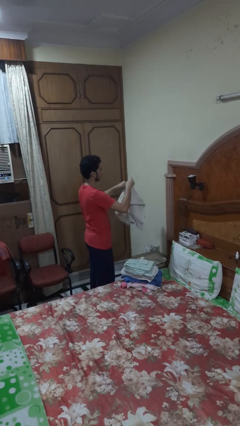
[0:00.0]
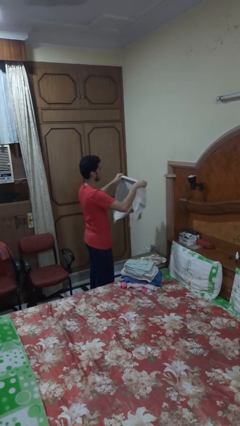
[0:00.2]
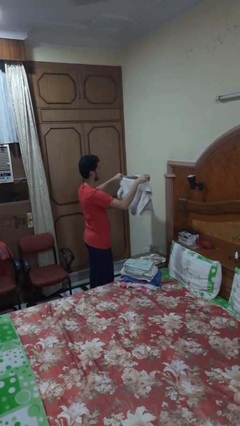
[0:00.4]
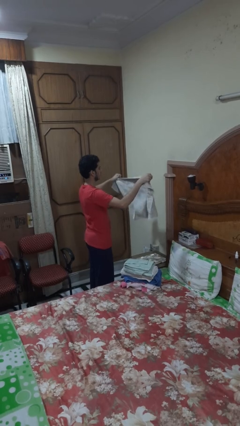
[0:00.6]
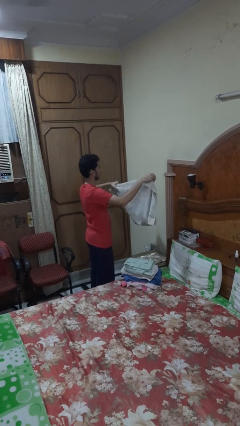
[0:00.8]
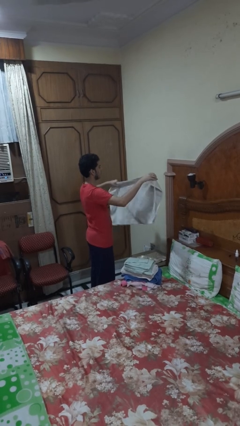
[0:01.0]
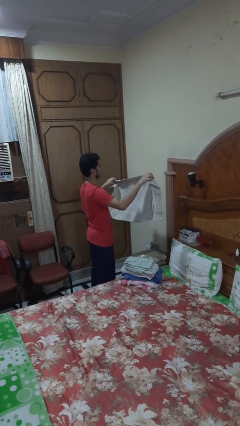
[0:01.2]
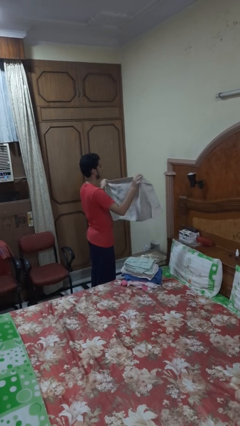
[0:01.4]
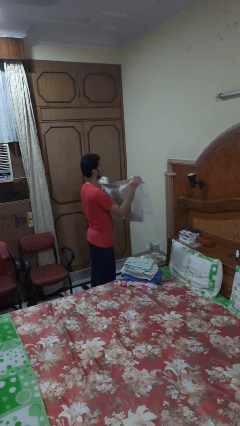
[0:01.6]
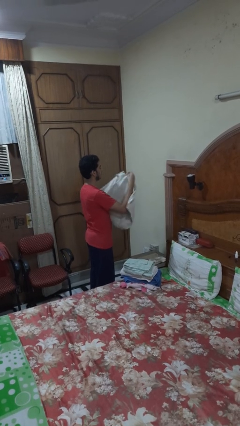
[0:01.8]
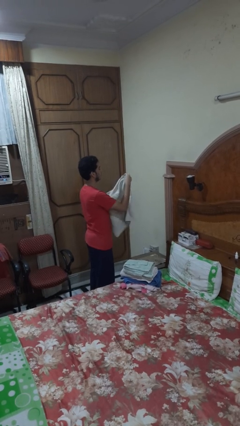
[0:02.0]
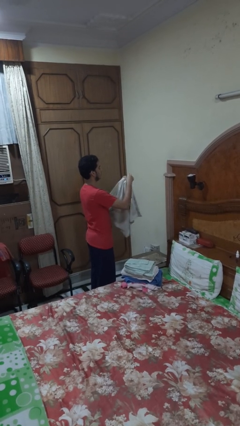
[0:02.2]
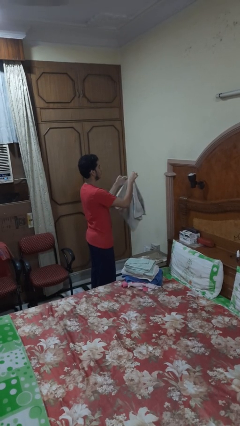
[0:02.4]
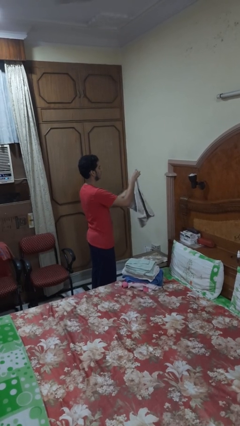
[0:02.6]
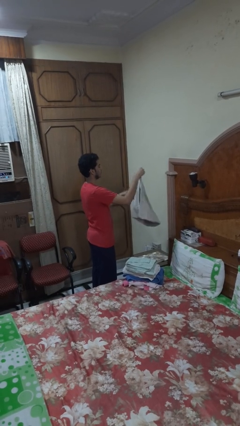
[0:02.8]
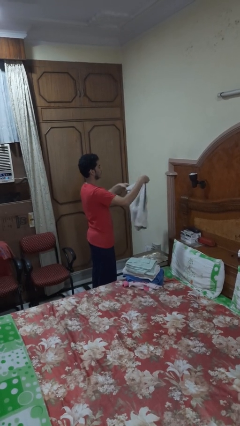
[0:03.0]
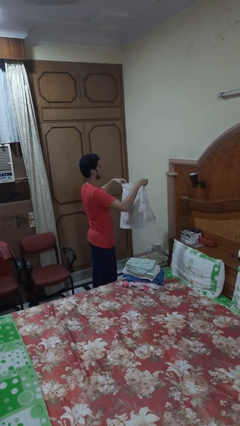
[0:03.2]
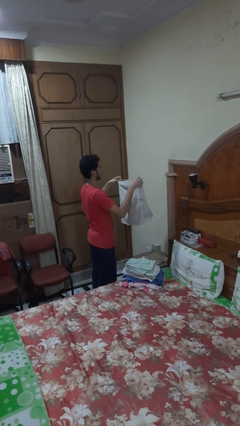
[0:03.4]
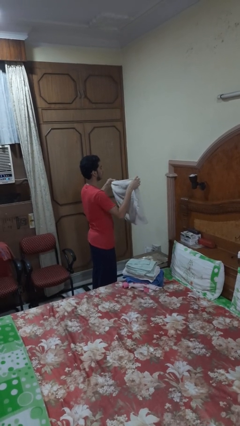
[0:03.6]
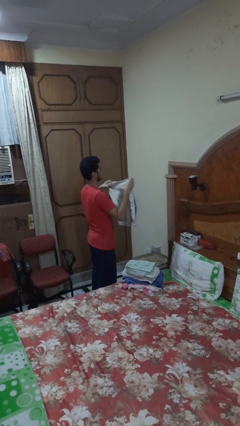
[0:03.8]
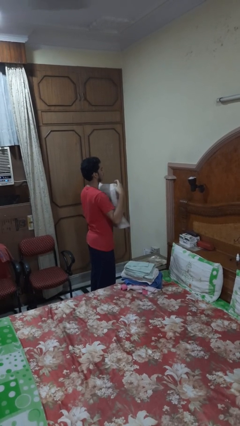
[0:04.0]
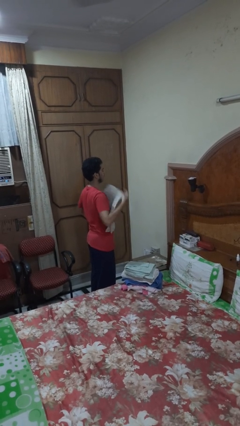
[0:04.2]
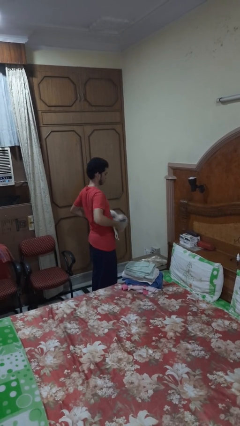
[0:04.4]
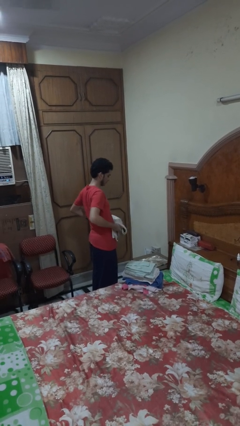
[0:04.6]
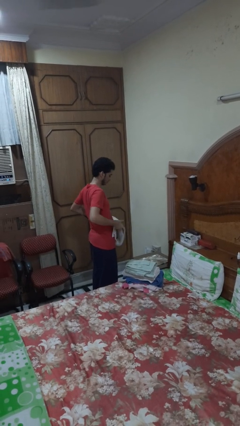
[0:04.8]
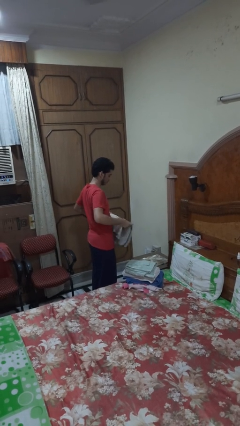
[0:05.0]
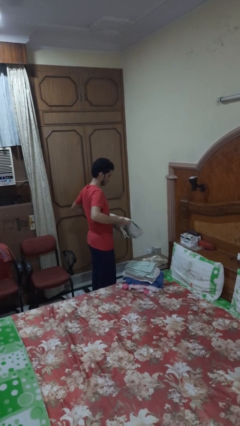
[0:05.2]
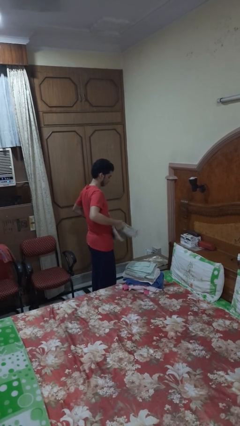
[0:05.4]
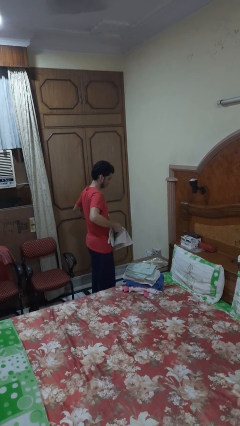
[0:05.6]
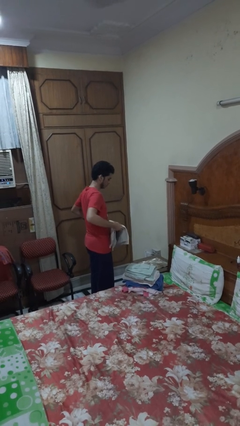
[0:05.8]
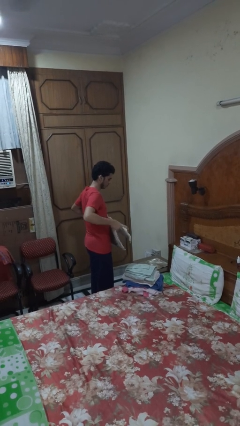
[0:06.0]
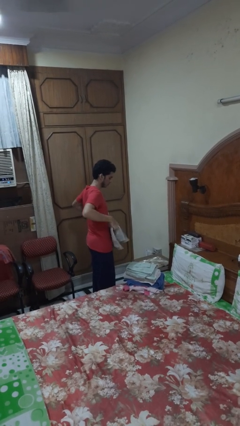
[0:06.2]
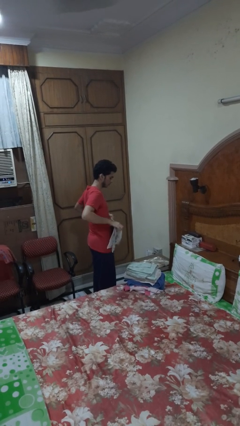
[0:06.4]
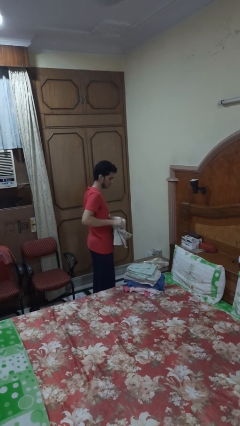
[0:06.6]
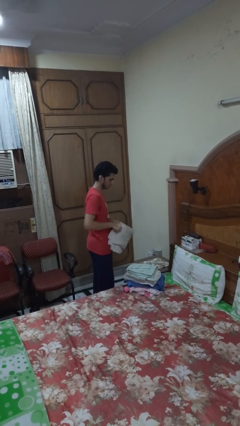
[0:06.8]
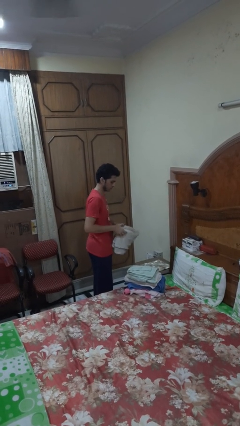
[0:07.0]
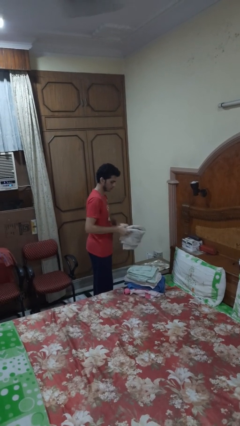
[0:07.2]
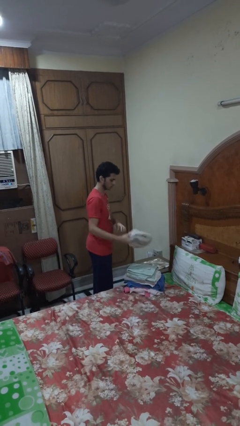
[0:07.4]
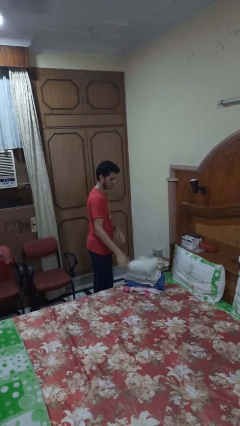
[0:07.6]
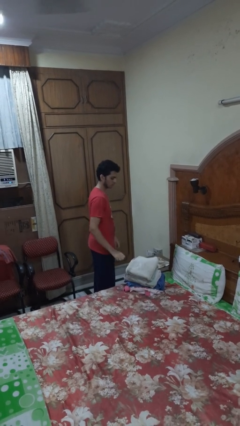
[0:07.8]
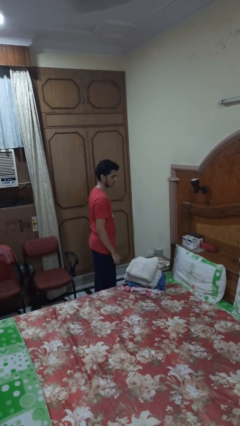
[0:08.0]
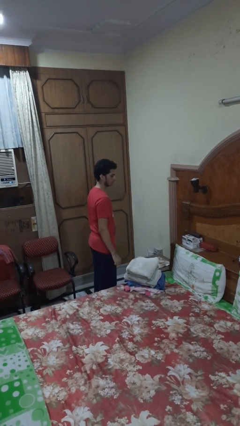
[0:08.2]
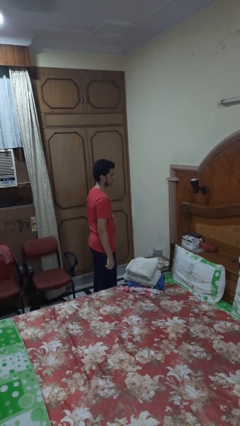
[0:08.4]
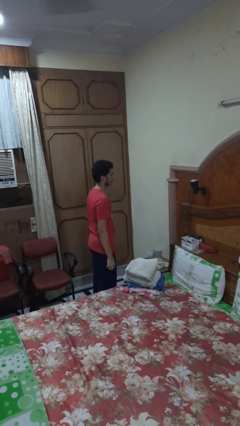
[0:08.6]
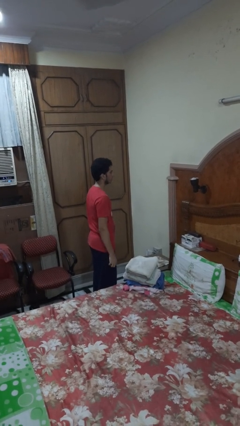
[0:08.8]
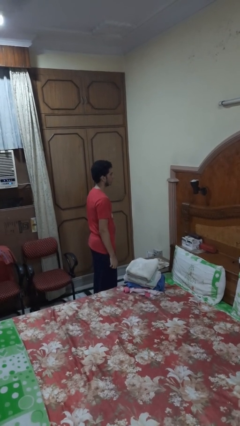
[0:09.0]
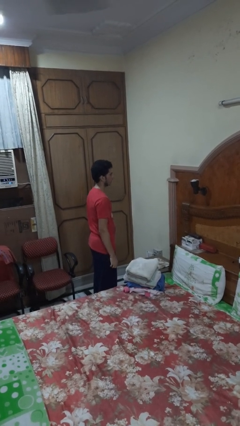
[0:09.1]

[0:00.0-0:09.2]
person folds towel

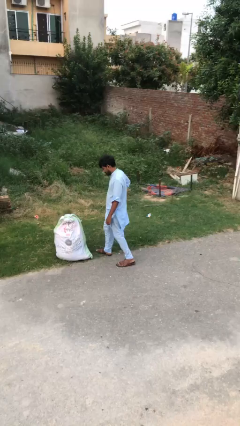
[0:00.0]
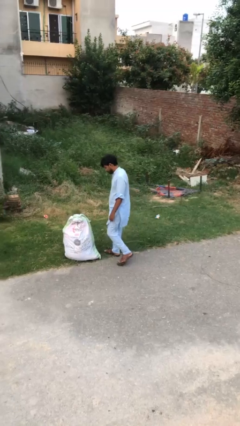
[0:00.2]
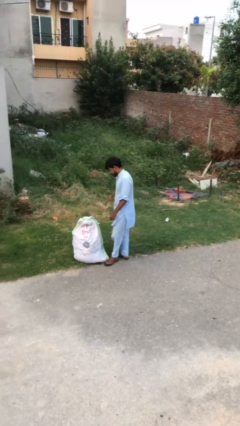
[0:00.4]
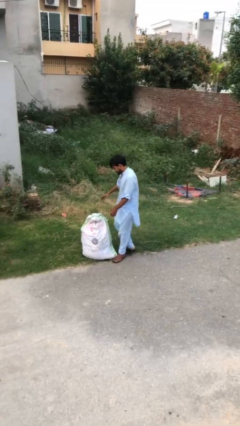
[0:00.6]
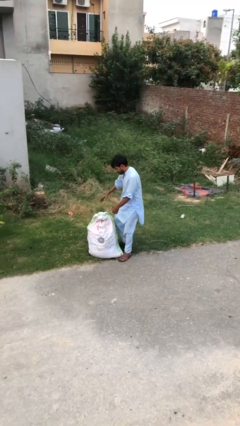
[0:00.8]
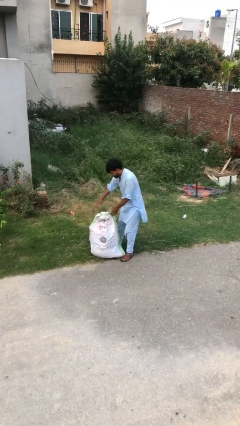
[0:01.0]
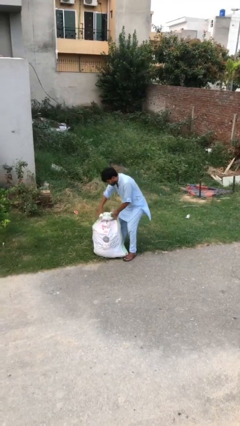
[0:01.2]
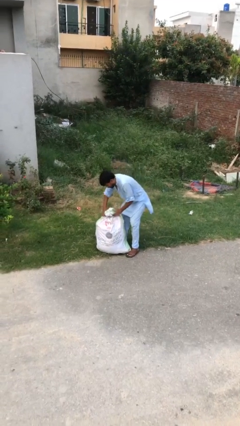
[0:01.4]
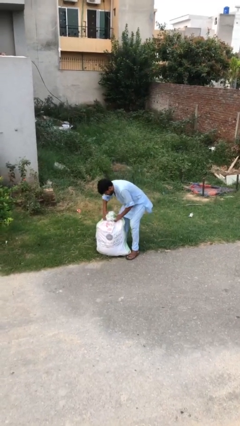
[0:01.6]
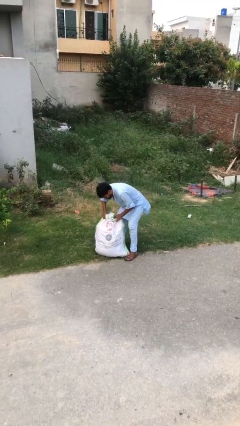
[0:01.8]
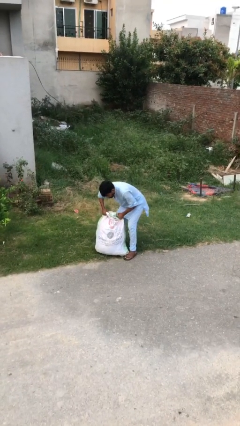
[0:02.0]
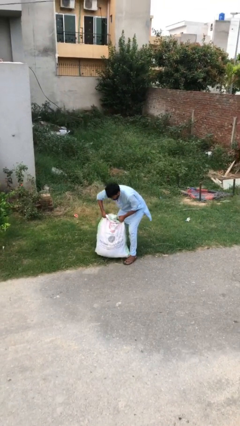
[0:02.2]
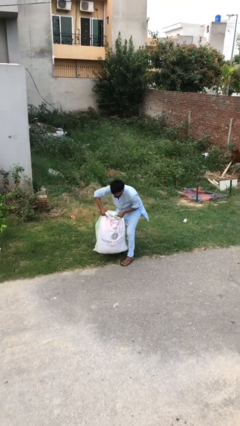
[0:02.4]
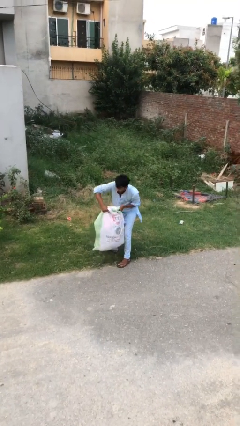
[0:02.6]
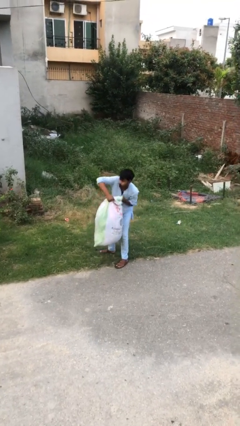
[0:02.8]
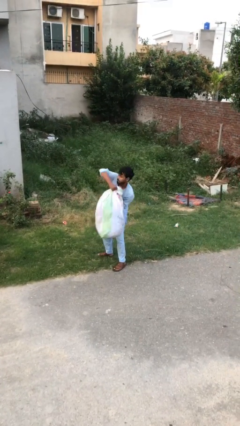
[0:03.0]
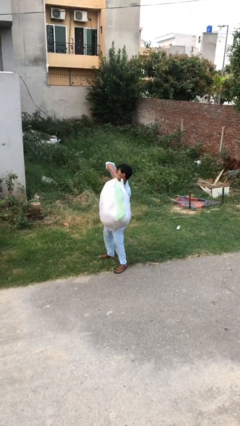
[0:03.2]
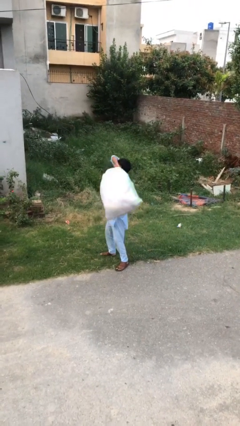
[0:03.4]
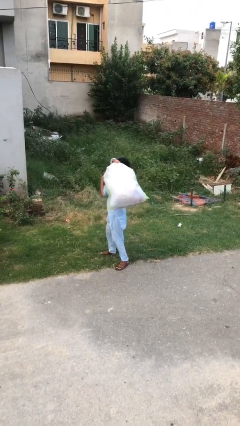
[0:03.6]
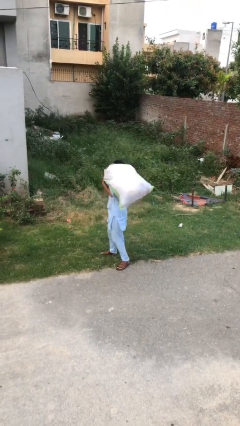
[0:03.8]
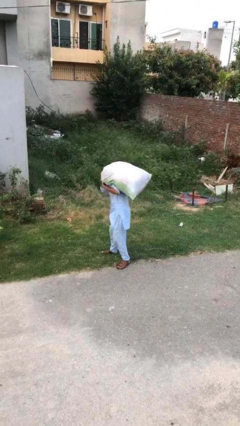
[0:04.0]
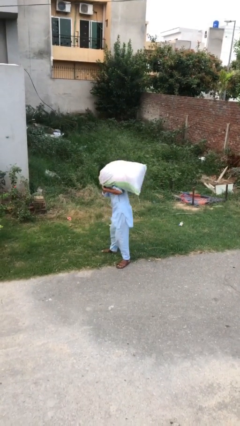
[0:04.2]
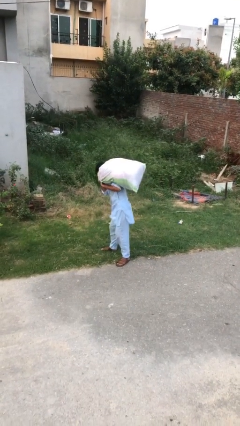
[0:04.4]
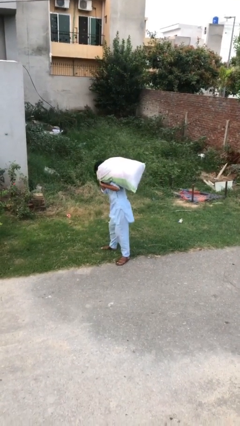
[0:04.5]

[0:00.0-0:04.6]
person picks up object from floor

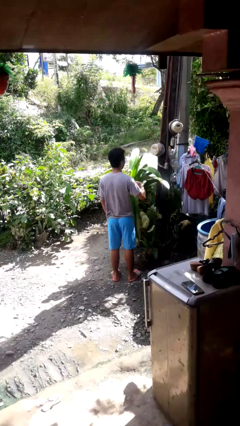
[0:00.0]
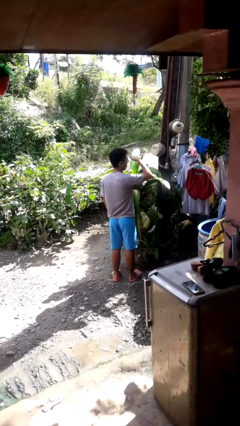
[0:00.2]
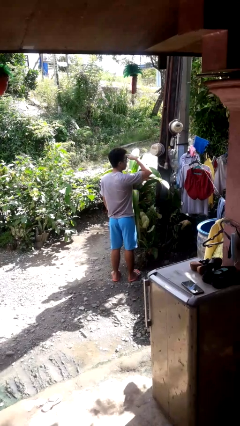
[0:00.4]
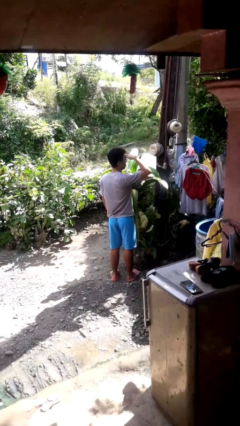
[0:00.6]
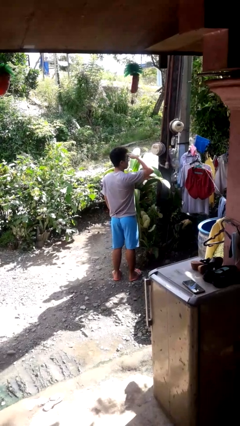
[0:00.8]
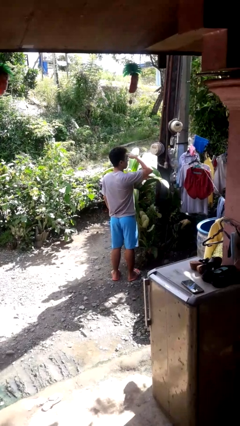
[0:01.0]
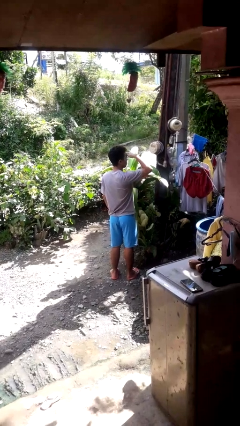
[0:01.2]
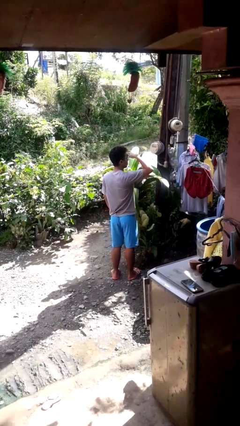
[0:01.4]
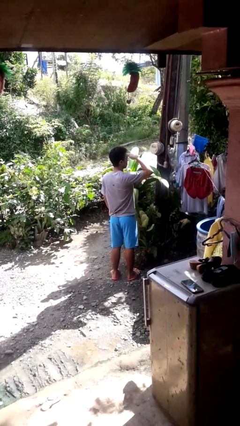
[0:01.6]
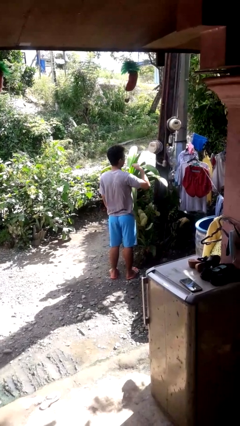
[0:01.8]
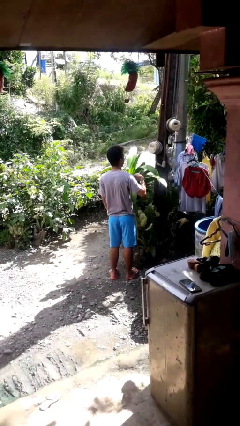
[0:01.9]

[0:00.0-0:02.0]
person shades eyes

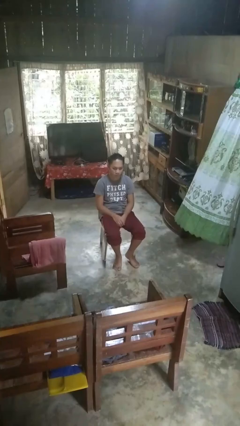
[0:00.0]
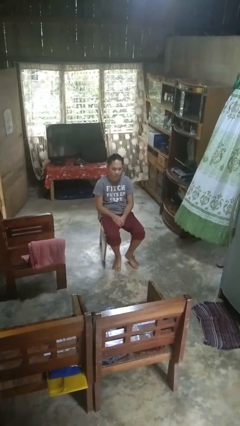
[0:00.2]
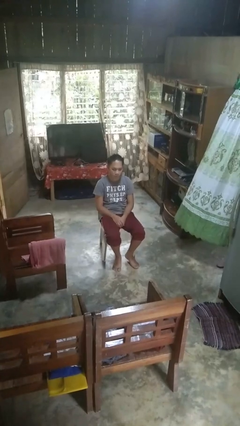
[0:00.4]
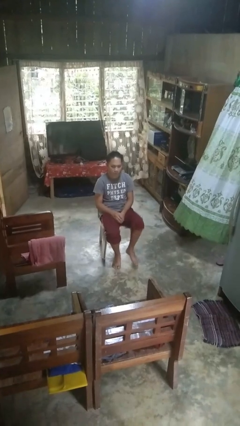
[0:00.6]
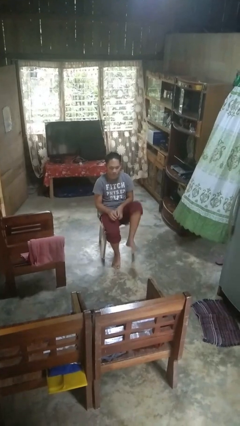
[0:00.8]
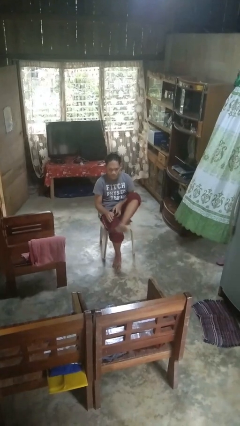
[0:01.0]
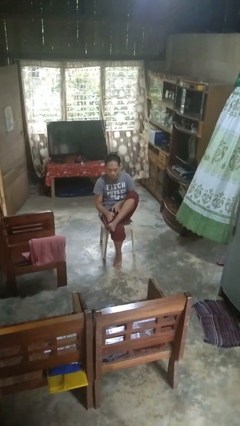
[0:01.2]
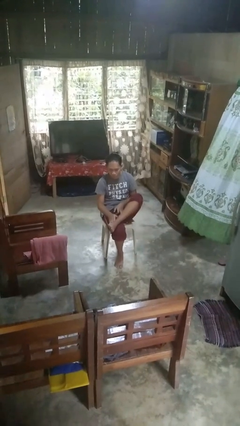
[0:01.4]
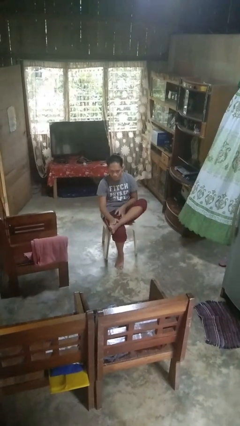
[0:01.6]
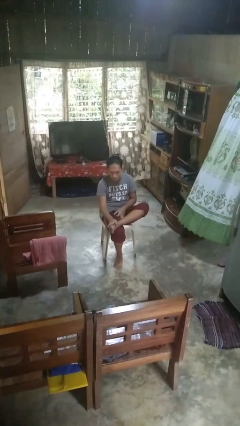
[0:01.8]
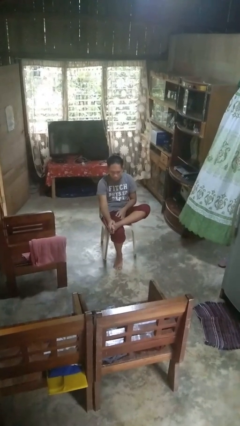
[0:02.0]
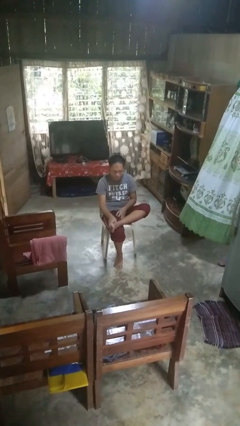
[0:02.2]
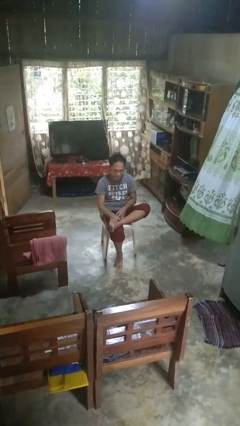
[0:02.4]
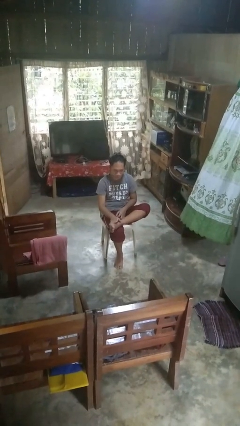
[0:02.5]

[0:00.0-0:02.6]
person rubs foot
